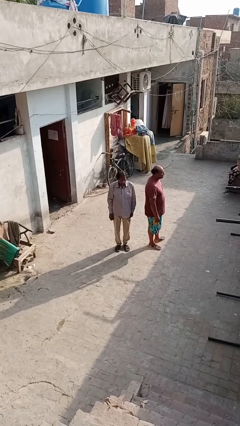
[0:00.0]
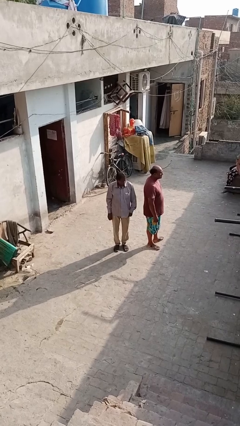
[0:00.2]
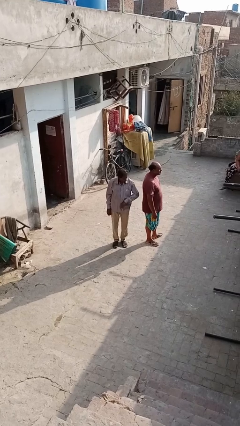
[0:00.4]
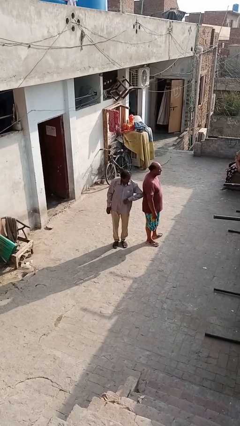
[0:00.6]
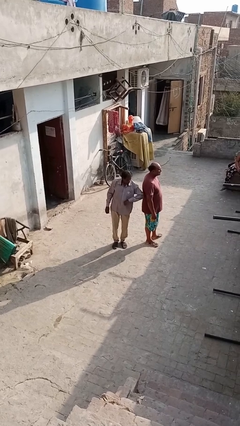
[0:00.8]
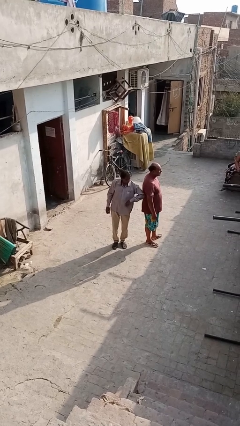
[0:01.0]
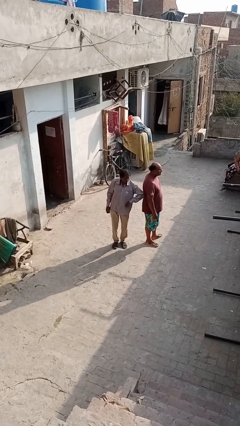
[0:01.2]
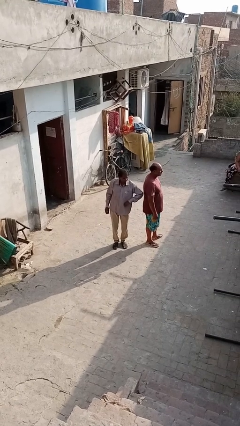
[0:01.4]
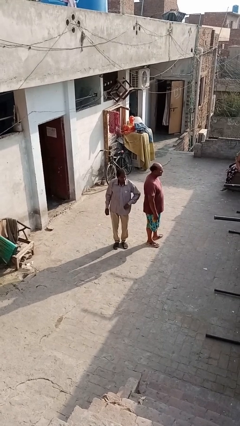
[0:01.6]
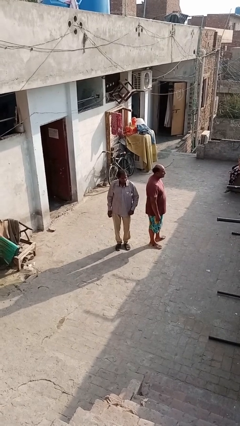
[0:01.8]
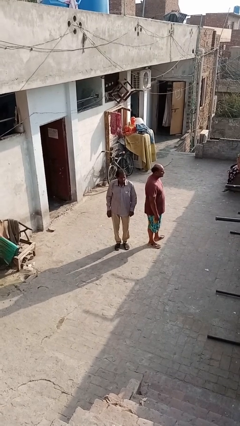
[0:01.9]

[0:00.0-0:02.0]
person nudges person with elbow

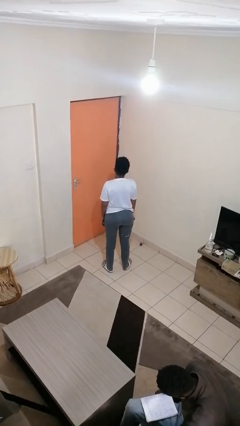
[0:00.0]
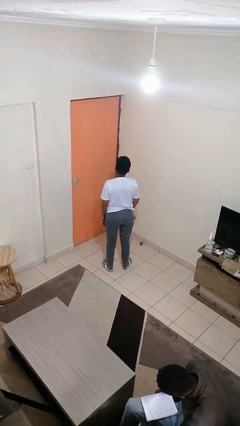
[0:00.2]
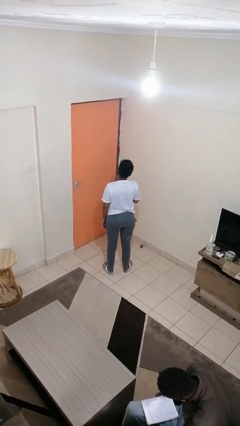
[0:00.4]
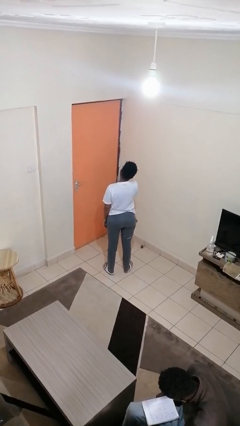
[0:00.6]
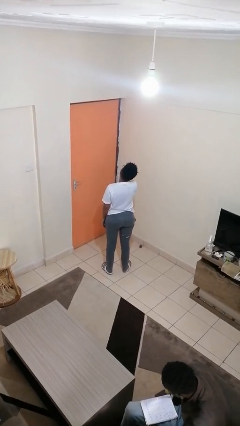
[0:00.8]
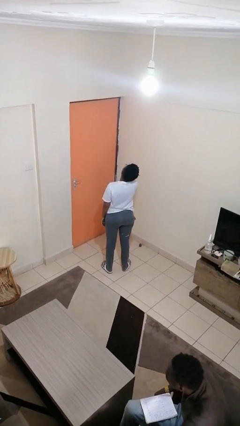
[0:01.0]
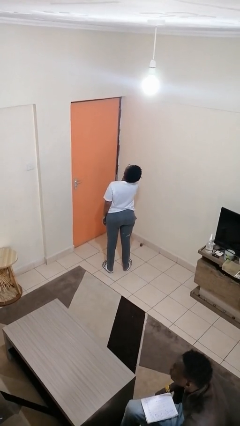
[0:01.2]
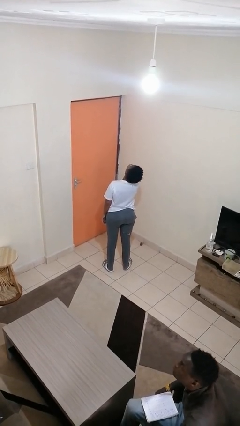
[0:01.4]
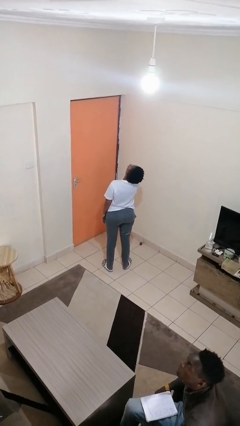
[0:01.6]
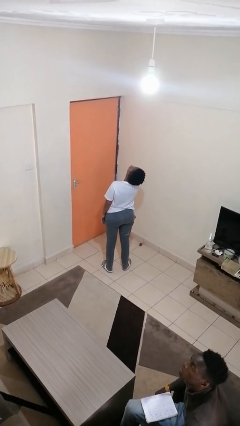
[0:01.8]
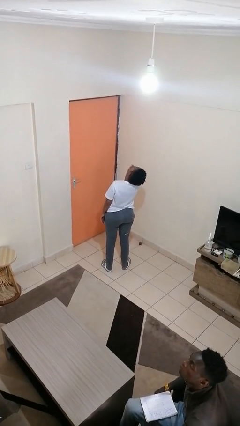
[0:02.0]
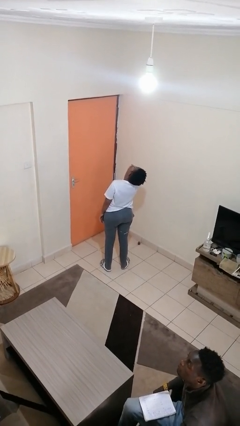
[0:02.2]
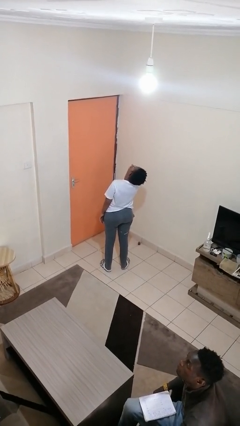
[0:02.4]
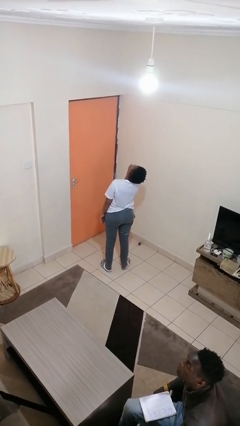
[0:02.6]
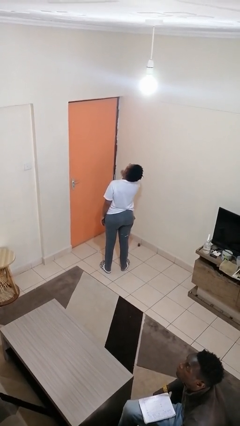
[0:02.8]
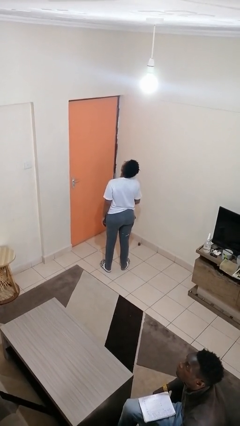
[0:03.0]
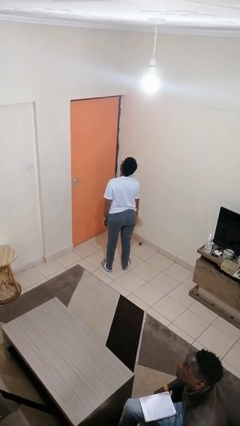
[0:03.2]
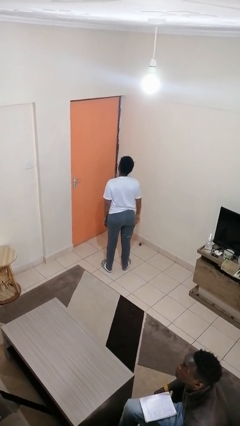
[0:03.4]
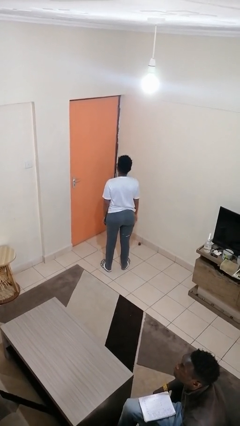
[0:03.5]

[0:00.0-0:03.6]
person yawns

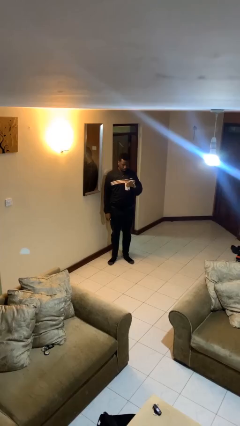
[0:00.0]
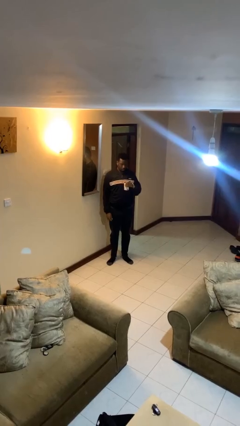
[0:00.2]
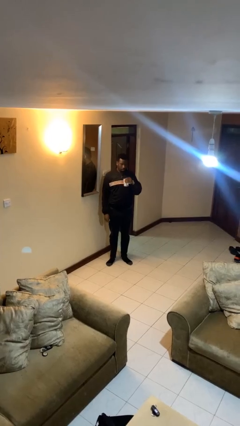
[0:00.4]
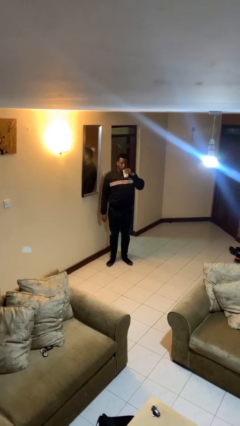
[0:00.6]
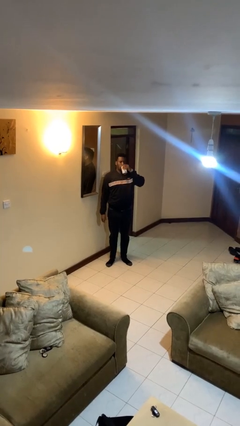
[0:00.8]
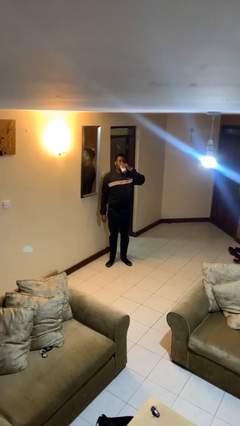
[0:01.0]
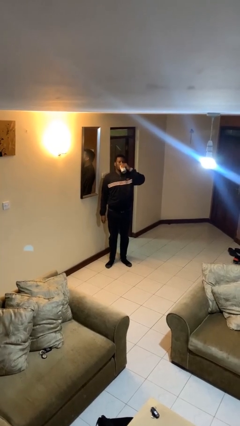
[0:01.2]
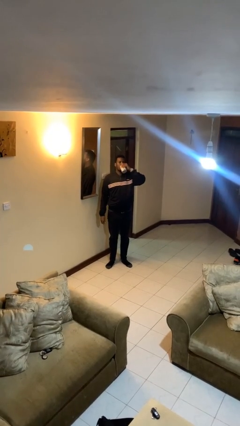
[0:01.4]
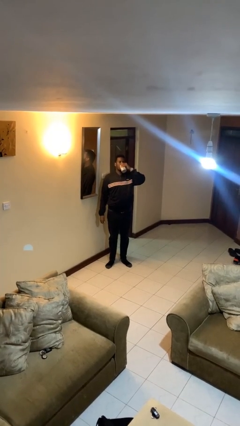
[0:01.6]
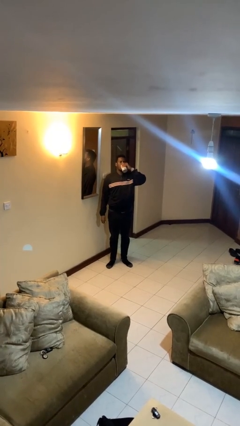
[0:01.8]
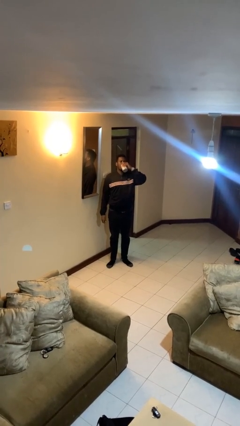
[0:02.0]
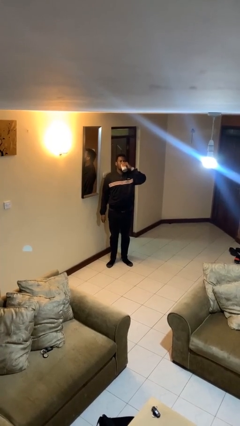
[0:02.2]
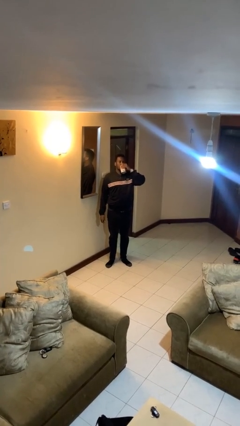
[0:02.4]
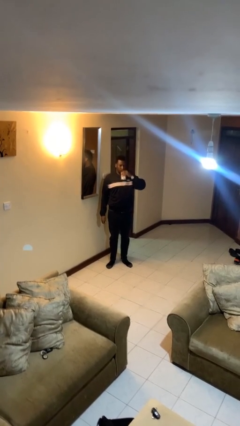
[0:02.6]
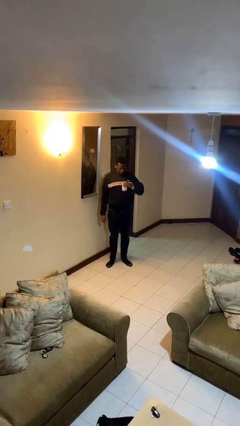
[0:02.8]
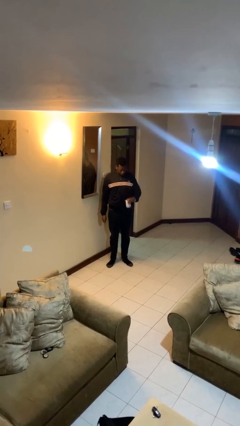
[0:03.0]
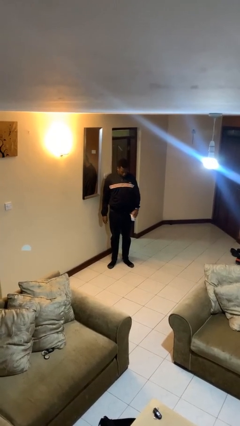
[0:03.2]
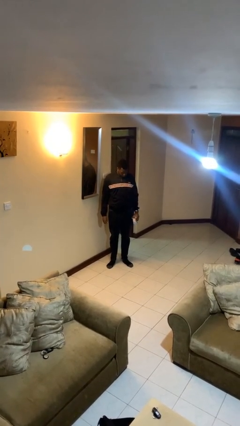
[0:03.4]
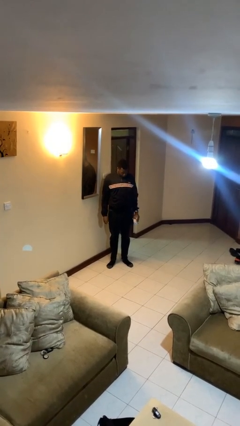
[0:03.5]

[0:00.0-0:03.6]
person drinks from beverage can

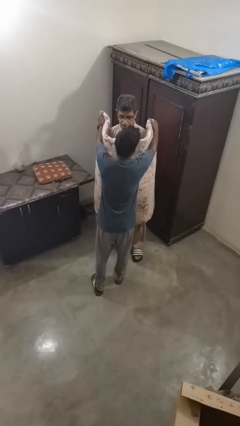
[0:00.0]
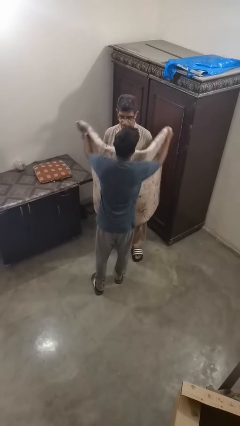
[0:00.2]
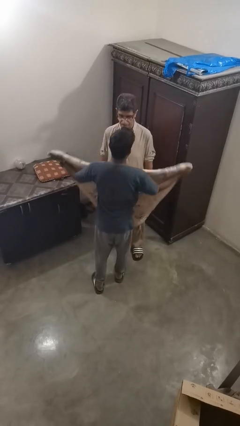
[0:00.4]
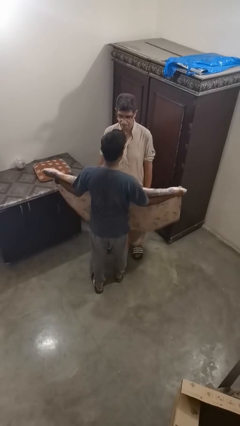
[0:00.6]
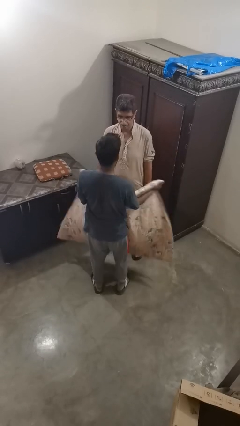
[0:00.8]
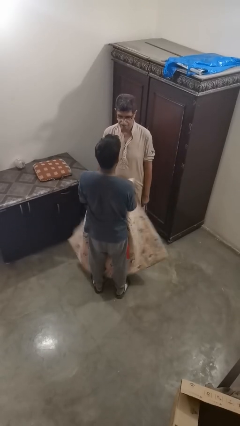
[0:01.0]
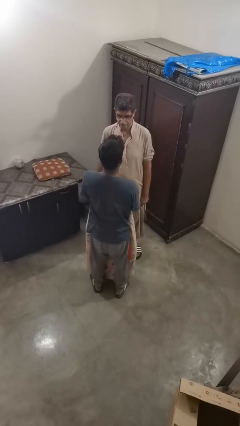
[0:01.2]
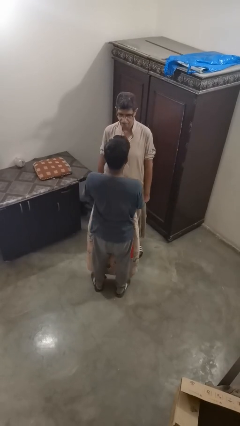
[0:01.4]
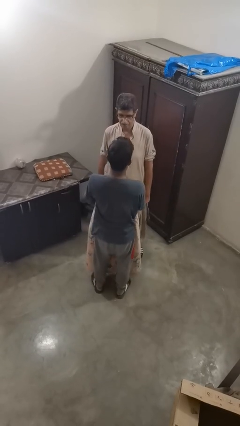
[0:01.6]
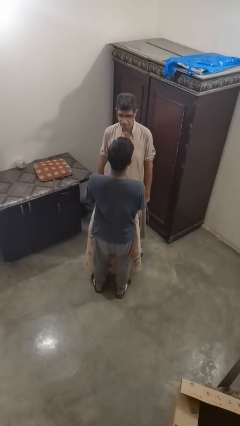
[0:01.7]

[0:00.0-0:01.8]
person uncovers friend with blanket

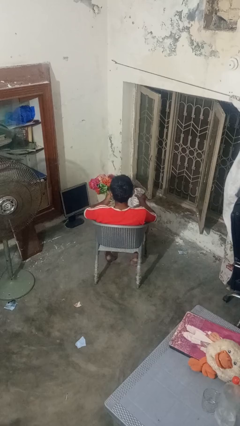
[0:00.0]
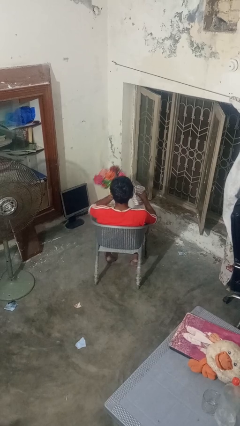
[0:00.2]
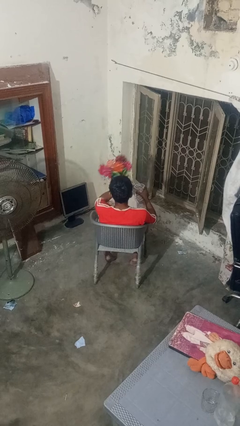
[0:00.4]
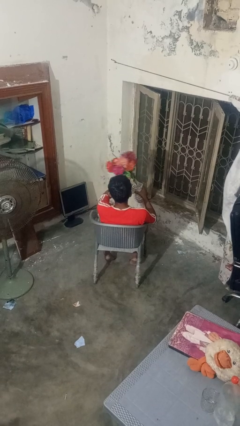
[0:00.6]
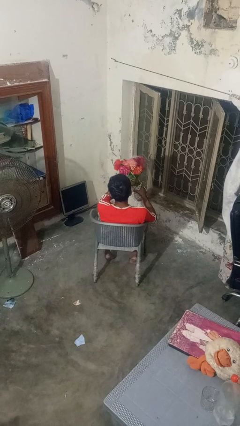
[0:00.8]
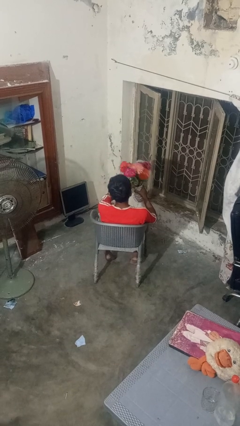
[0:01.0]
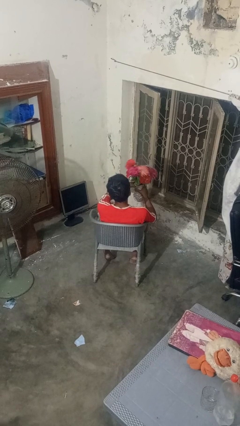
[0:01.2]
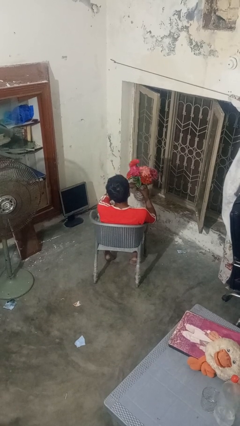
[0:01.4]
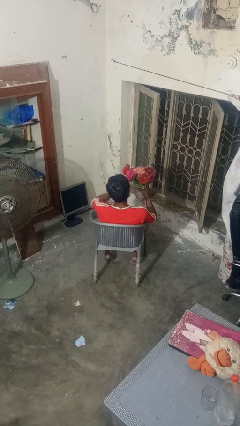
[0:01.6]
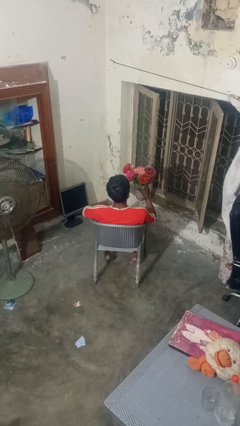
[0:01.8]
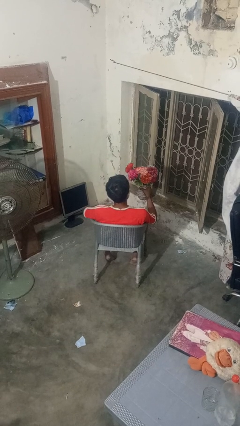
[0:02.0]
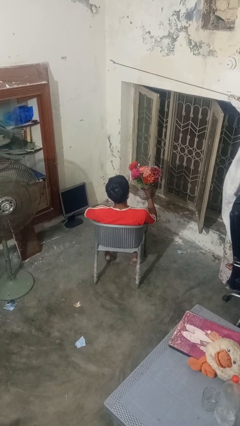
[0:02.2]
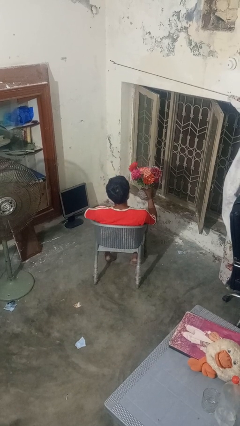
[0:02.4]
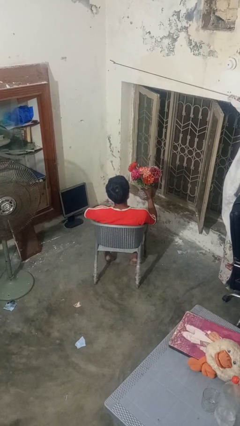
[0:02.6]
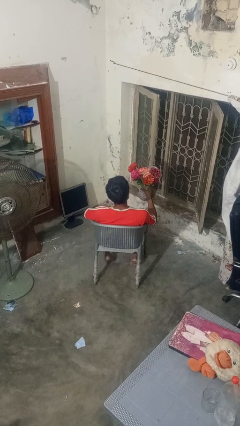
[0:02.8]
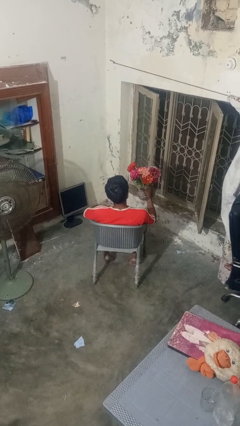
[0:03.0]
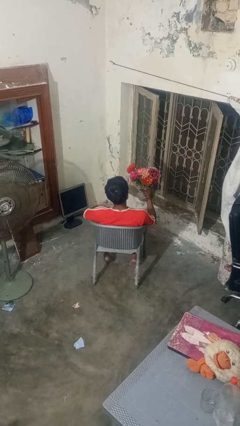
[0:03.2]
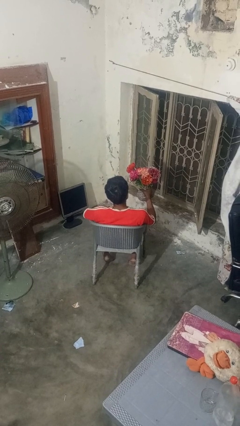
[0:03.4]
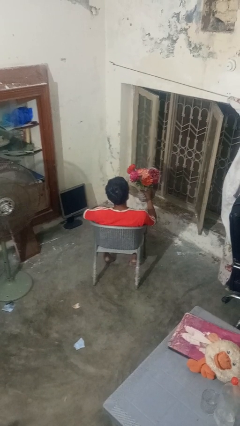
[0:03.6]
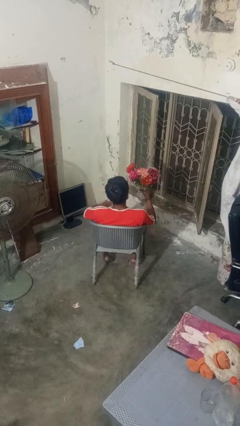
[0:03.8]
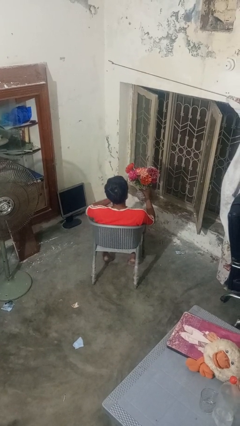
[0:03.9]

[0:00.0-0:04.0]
person arranges flowers in vase

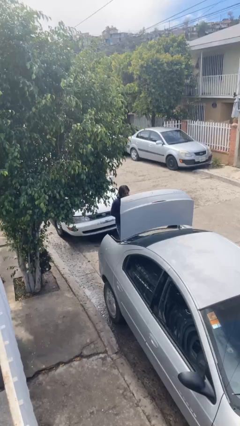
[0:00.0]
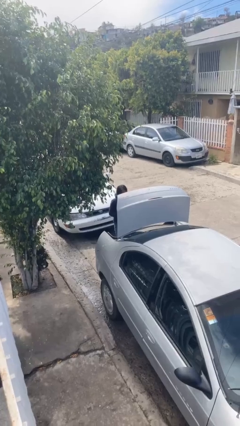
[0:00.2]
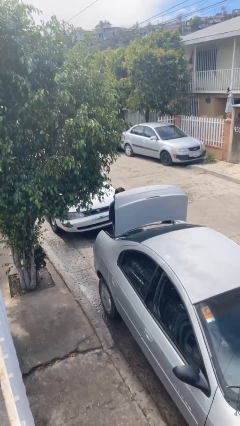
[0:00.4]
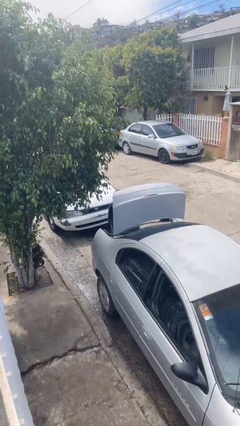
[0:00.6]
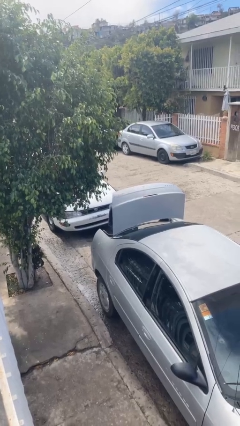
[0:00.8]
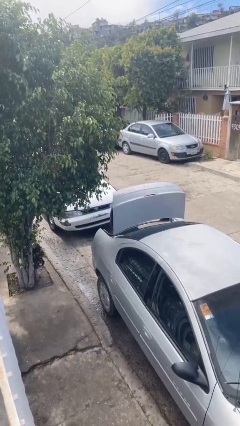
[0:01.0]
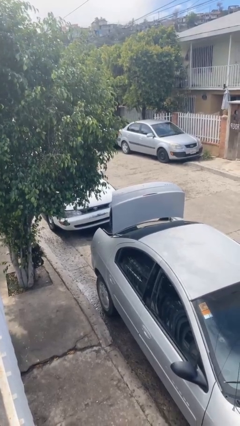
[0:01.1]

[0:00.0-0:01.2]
person loads car

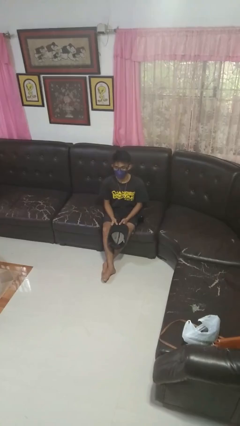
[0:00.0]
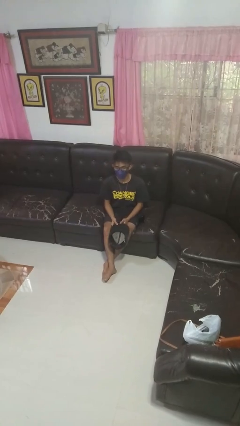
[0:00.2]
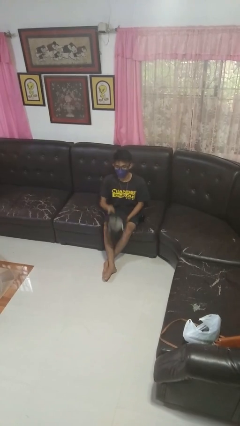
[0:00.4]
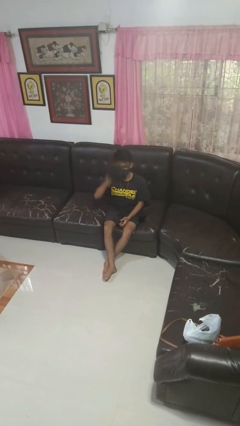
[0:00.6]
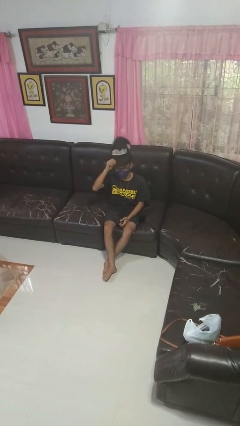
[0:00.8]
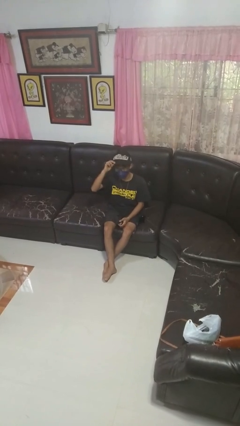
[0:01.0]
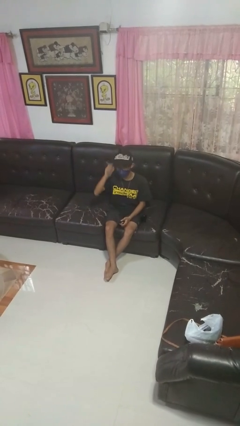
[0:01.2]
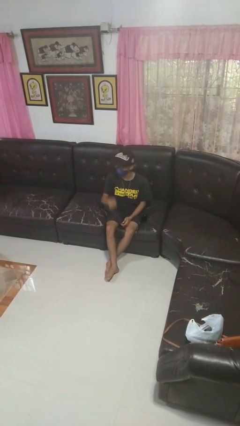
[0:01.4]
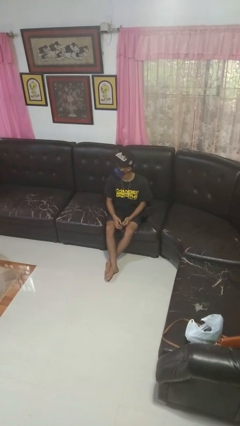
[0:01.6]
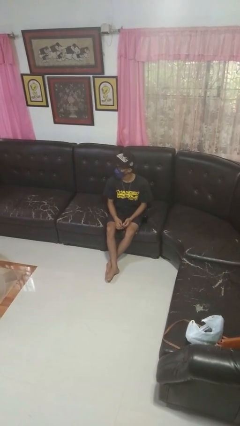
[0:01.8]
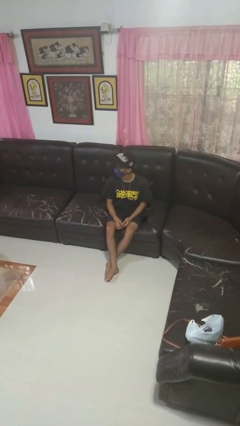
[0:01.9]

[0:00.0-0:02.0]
person puts on hat
